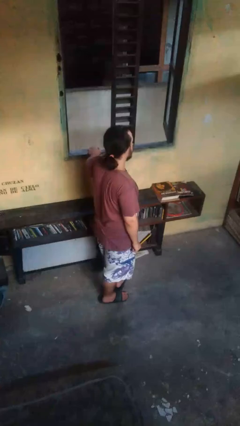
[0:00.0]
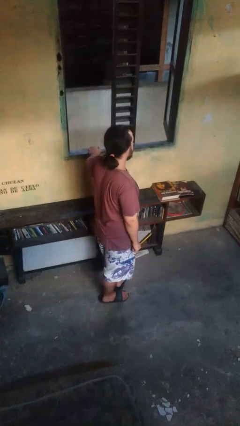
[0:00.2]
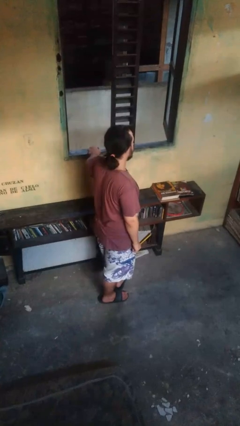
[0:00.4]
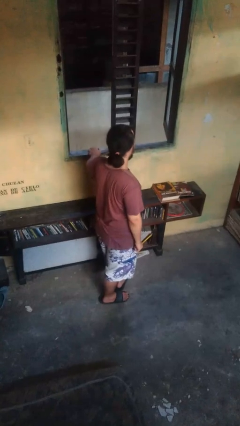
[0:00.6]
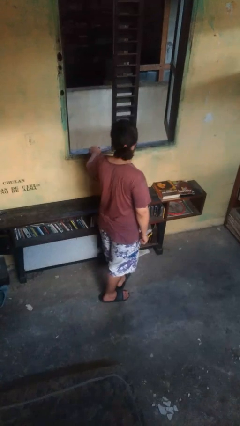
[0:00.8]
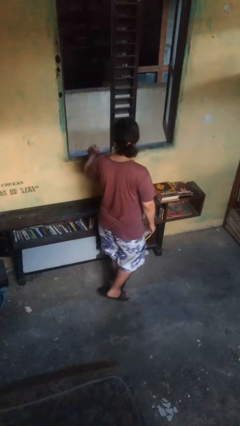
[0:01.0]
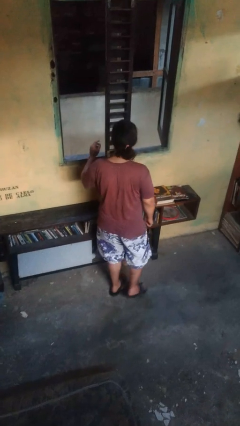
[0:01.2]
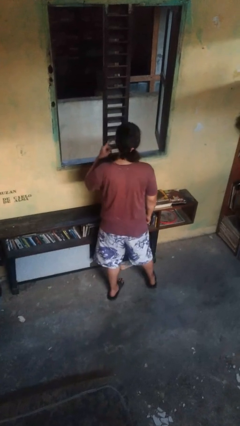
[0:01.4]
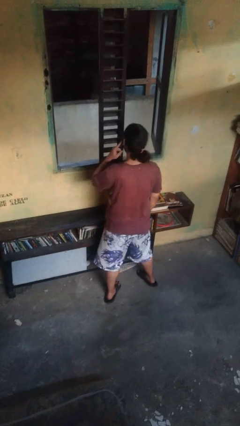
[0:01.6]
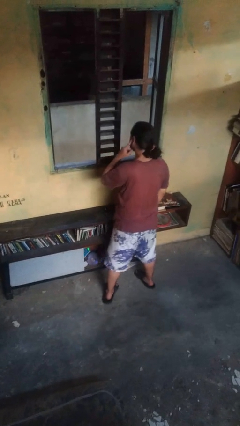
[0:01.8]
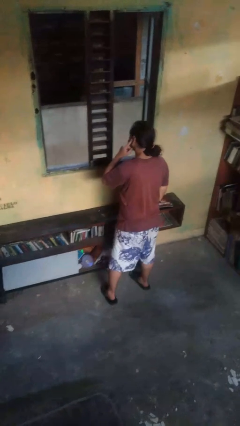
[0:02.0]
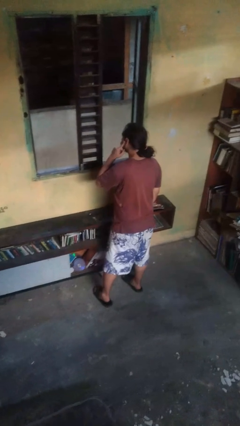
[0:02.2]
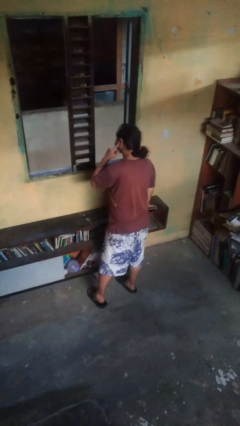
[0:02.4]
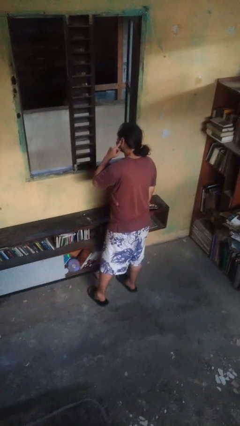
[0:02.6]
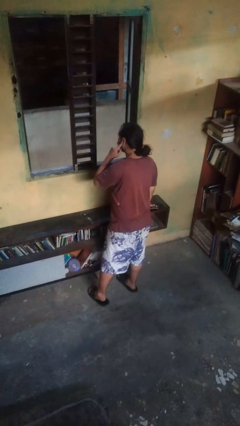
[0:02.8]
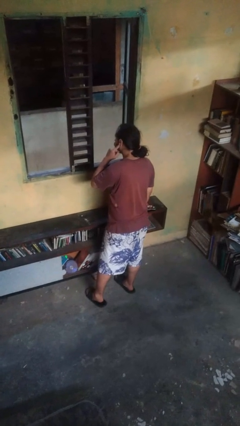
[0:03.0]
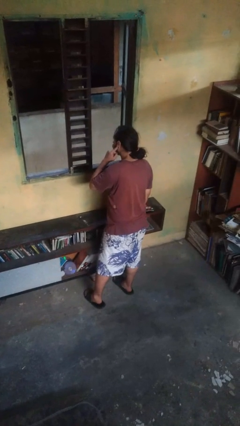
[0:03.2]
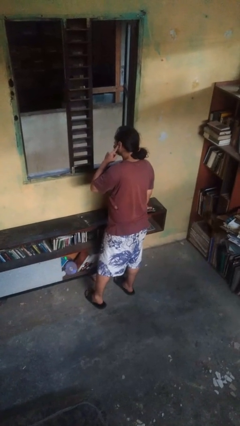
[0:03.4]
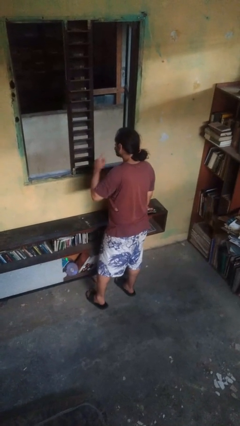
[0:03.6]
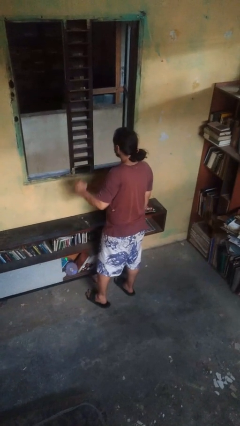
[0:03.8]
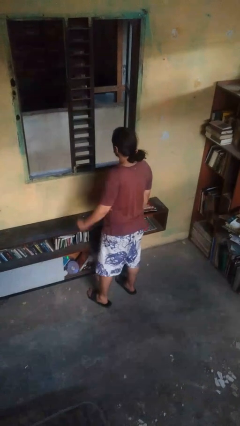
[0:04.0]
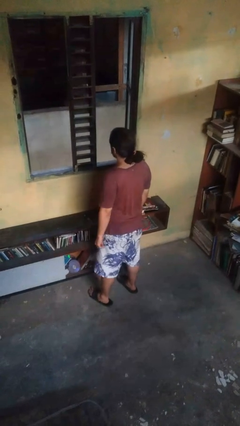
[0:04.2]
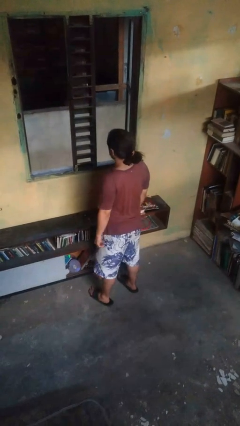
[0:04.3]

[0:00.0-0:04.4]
person gestures listen closely

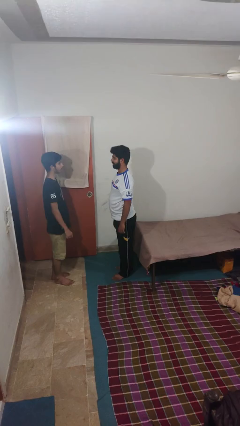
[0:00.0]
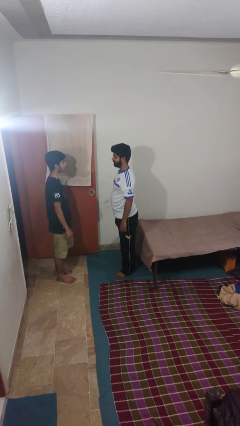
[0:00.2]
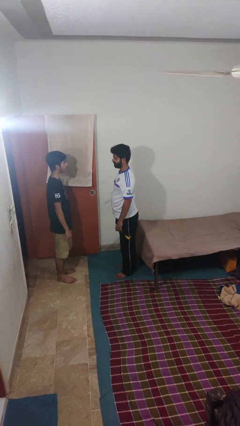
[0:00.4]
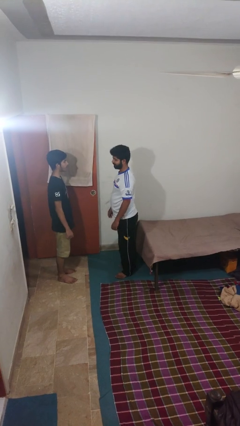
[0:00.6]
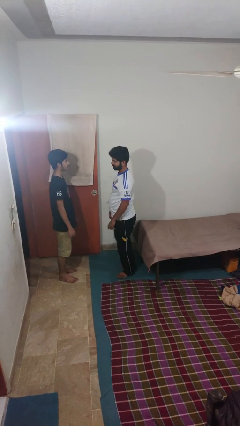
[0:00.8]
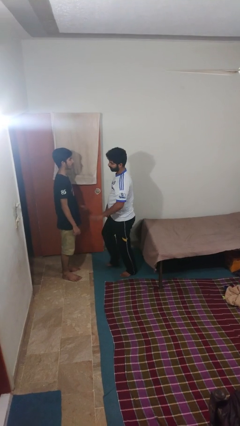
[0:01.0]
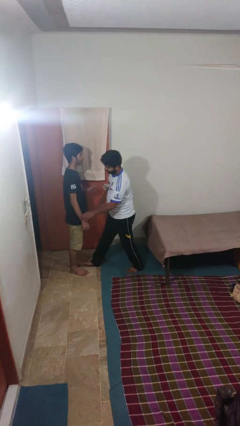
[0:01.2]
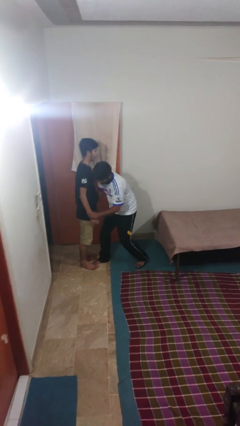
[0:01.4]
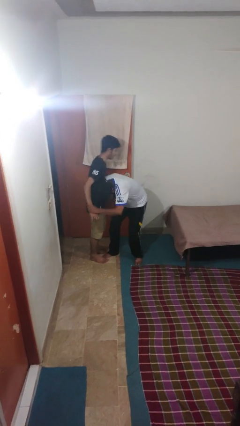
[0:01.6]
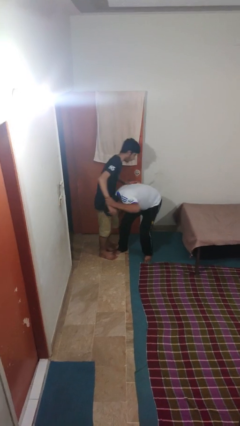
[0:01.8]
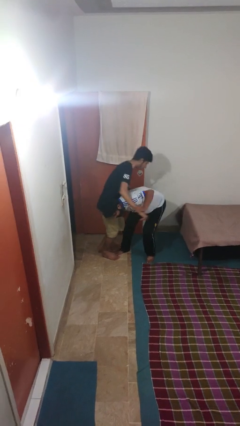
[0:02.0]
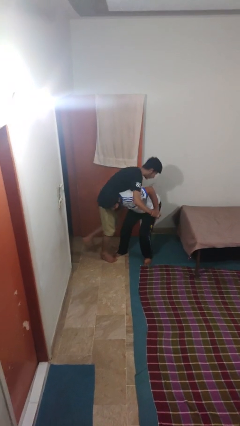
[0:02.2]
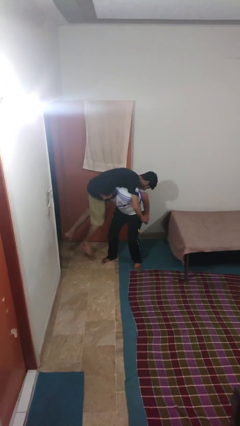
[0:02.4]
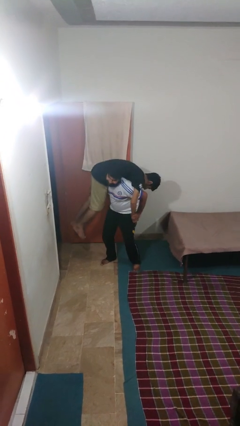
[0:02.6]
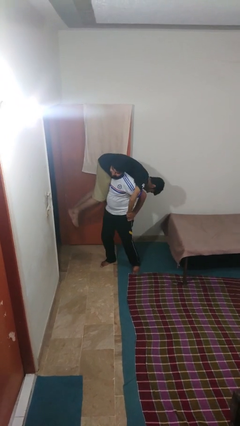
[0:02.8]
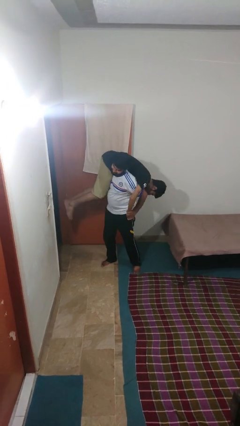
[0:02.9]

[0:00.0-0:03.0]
person carries person over shoulder

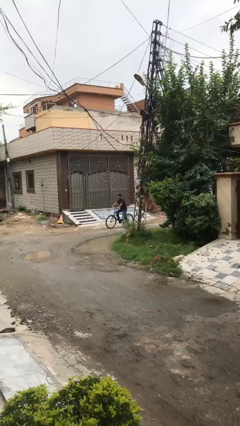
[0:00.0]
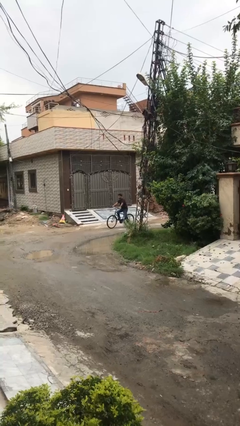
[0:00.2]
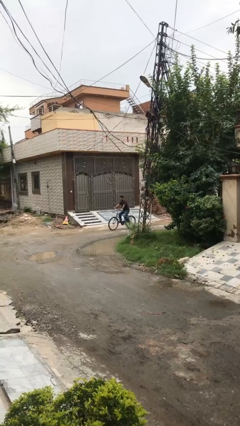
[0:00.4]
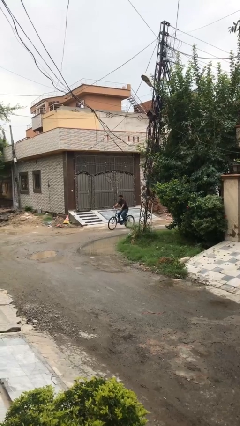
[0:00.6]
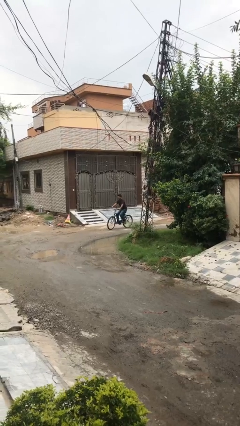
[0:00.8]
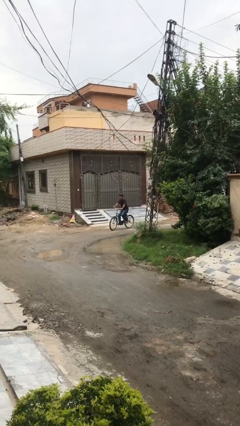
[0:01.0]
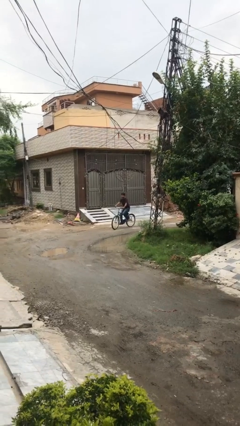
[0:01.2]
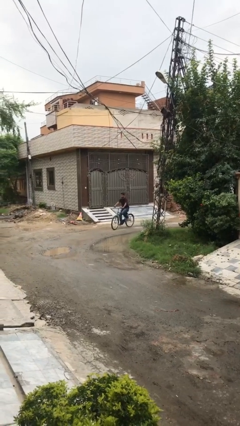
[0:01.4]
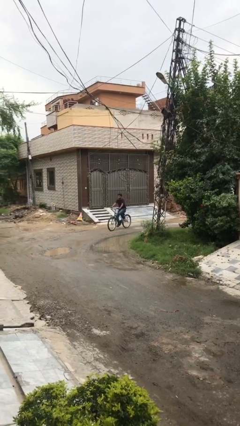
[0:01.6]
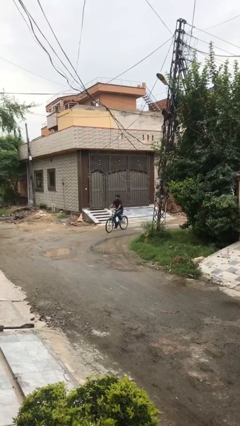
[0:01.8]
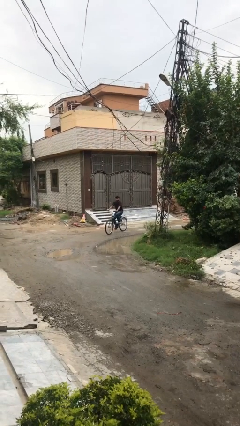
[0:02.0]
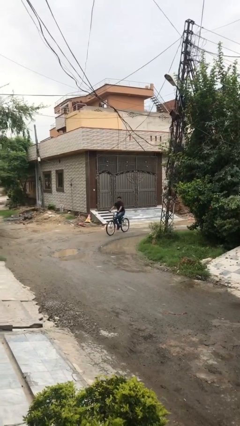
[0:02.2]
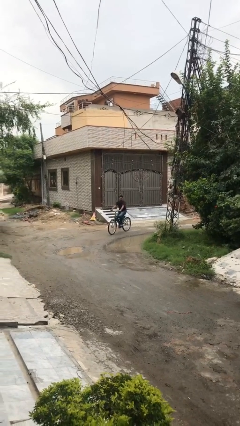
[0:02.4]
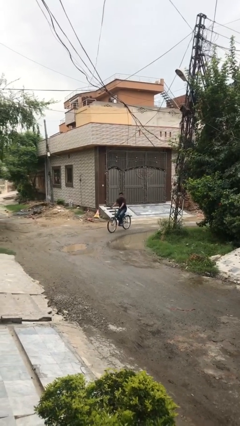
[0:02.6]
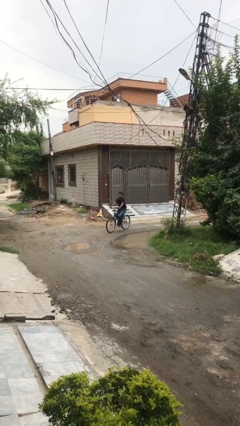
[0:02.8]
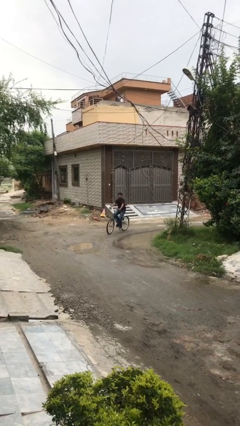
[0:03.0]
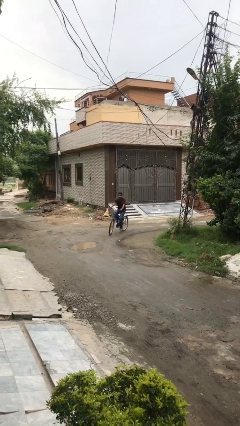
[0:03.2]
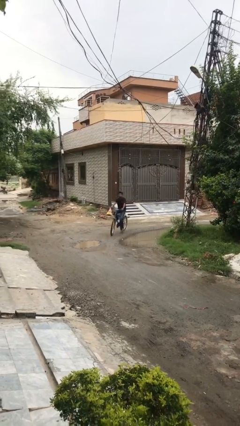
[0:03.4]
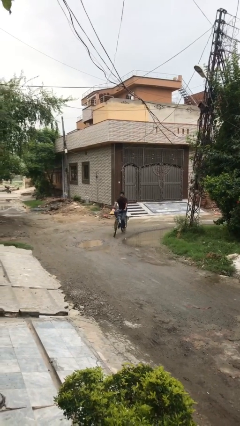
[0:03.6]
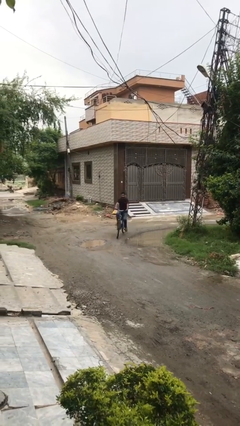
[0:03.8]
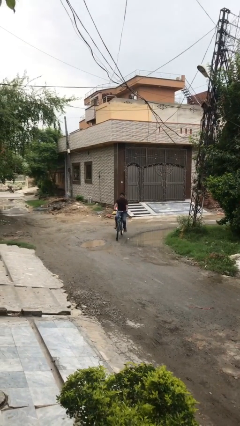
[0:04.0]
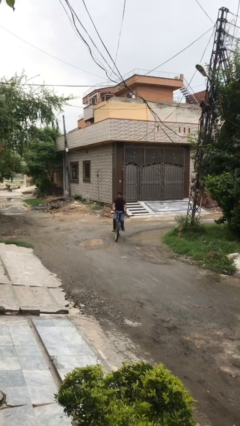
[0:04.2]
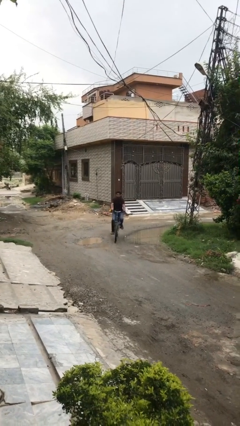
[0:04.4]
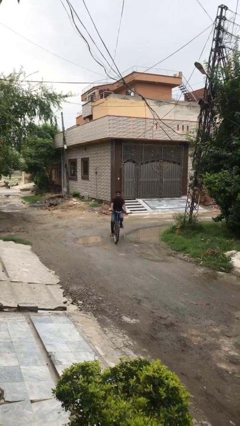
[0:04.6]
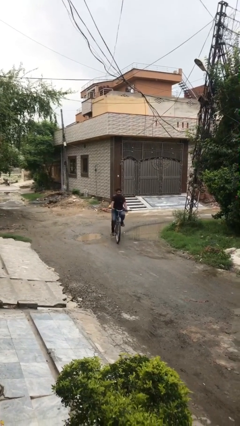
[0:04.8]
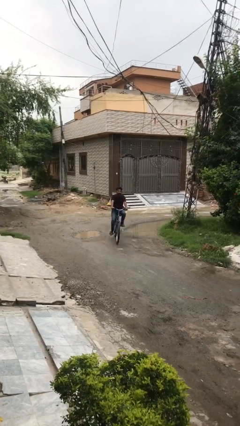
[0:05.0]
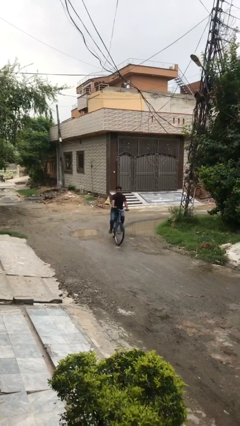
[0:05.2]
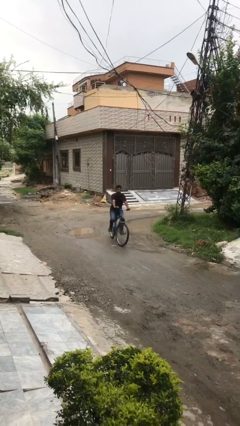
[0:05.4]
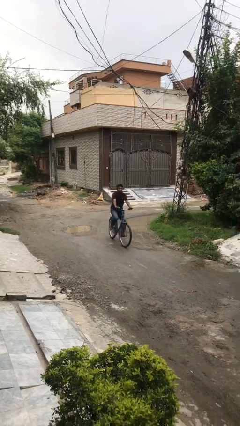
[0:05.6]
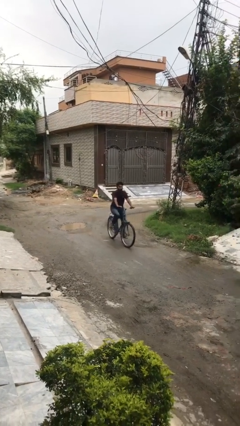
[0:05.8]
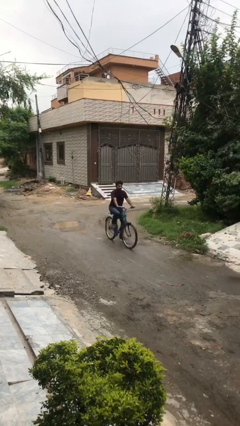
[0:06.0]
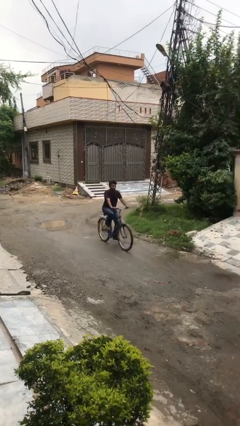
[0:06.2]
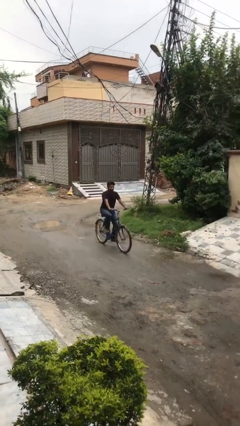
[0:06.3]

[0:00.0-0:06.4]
person rides bicycle

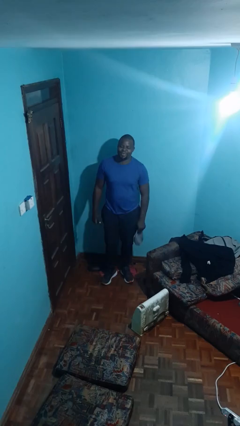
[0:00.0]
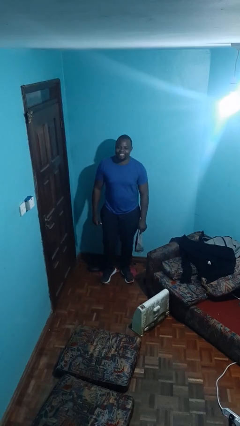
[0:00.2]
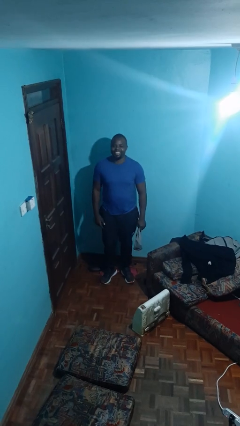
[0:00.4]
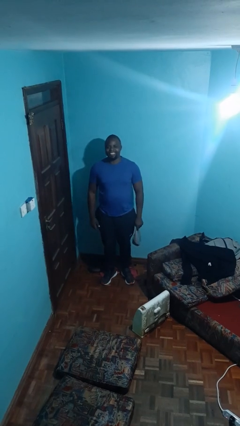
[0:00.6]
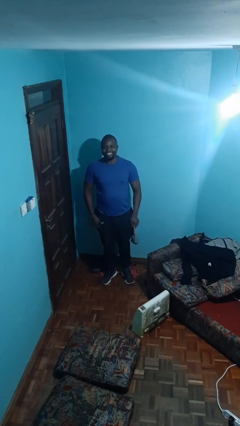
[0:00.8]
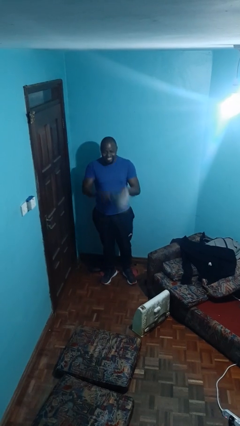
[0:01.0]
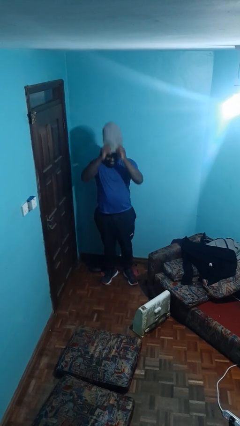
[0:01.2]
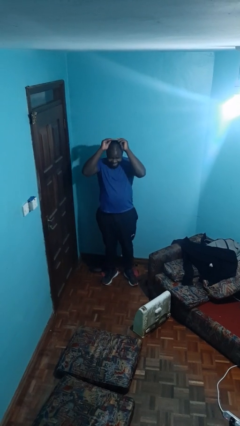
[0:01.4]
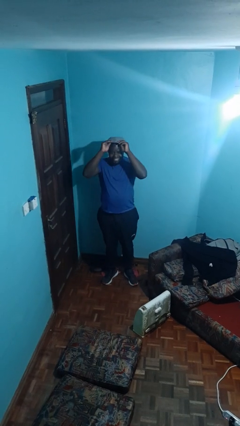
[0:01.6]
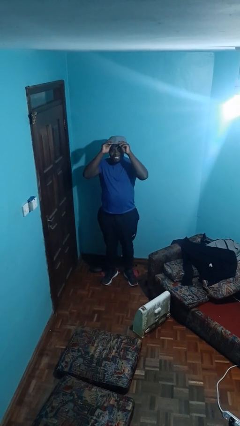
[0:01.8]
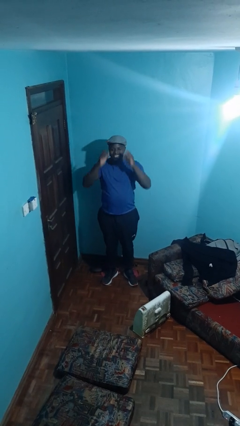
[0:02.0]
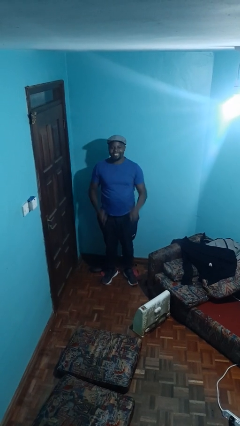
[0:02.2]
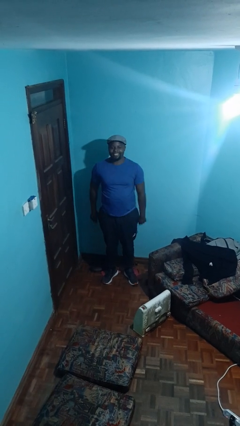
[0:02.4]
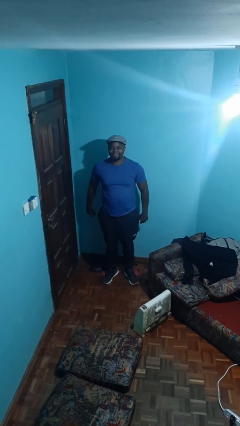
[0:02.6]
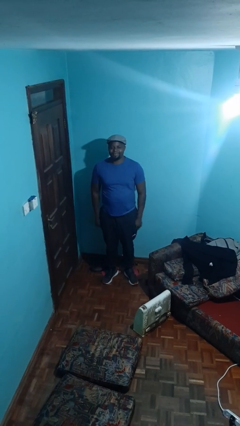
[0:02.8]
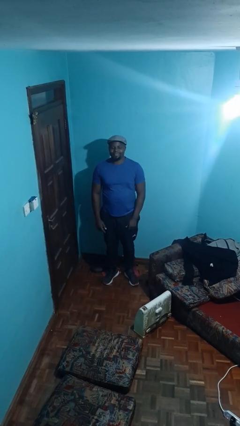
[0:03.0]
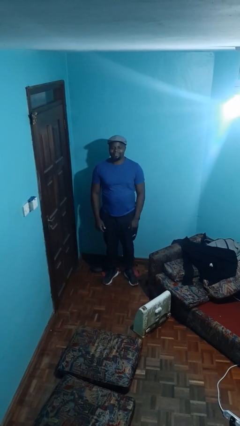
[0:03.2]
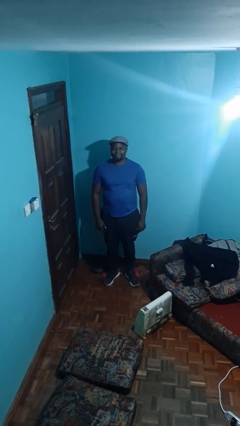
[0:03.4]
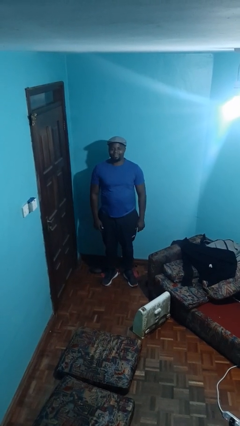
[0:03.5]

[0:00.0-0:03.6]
person puts on hat

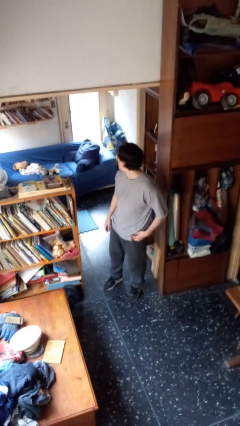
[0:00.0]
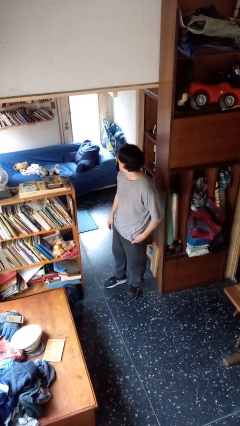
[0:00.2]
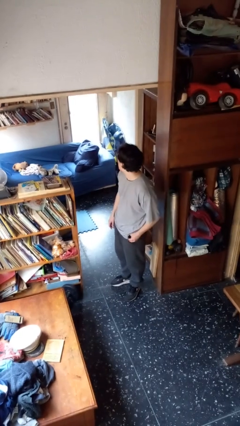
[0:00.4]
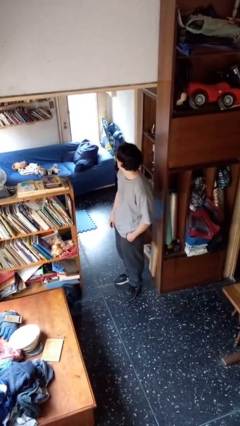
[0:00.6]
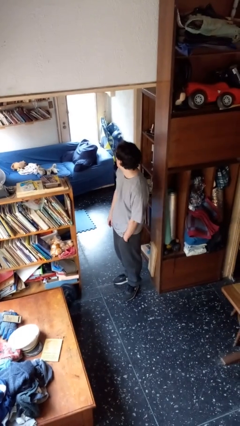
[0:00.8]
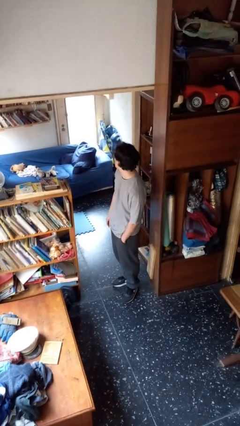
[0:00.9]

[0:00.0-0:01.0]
person puts hands in back pockets
